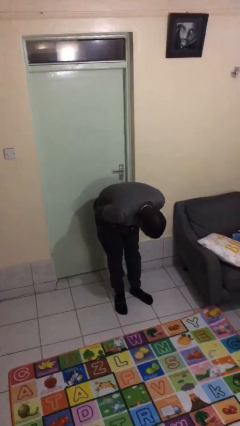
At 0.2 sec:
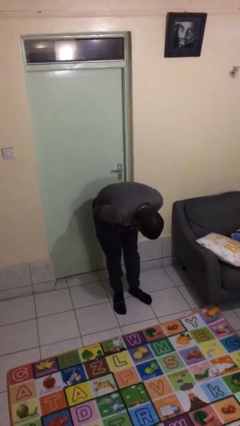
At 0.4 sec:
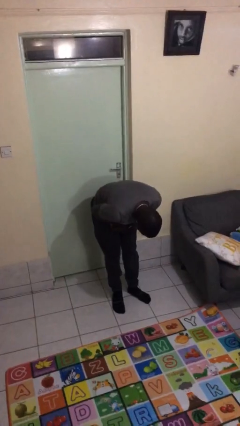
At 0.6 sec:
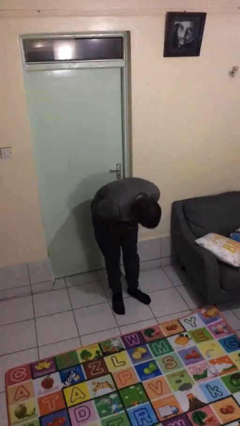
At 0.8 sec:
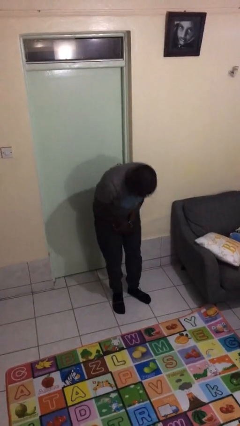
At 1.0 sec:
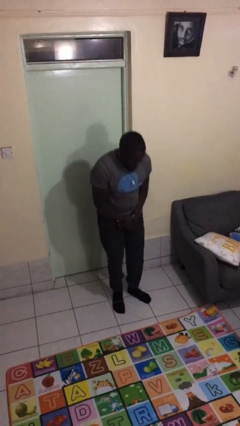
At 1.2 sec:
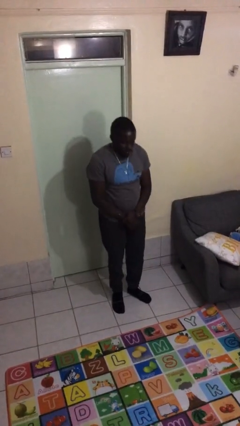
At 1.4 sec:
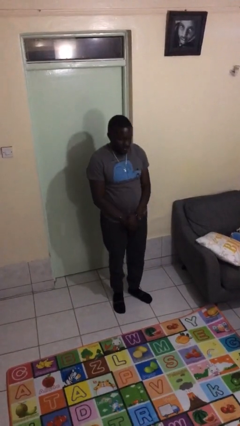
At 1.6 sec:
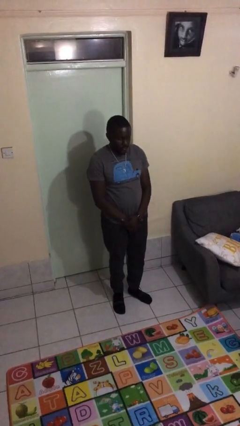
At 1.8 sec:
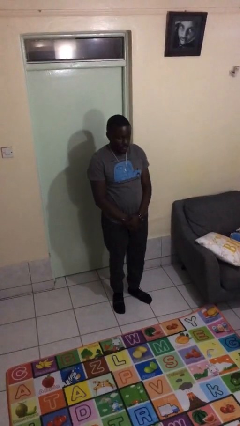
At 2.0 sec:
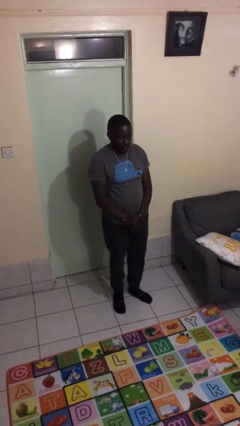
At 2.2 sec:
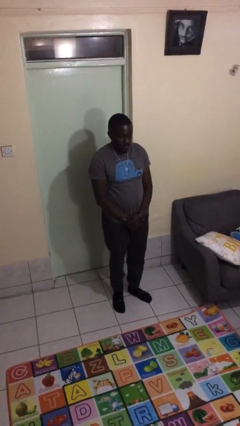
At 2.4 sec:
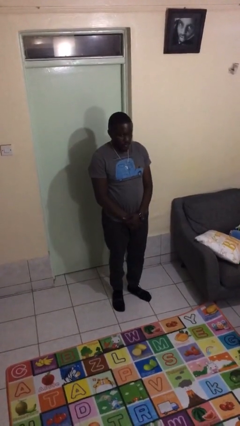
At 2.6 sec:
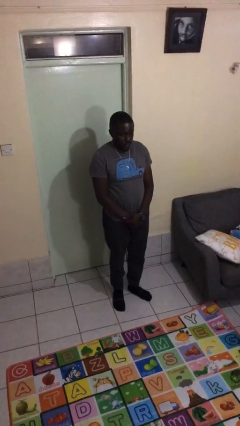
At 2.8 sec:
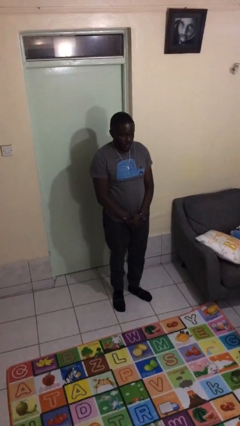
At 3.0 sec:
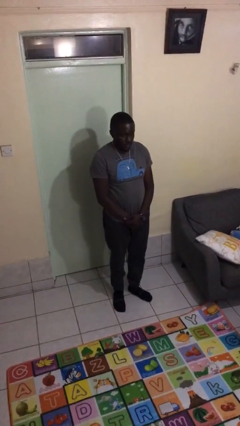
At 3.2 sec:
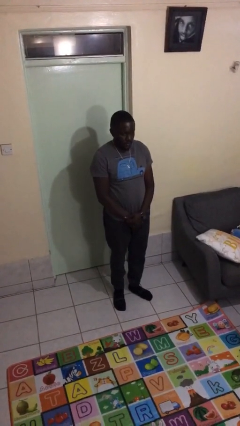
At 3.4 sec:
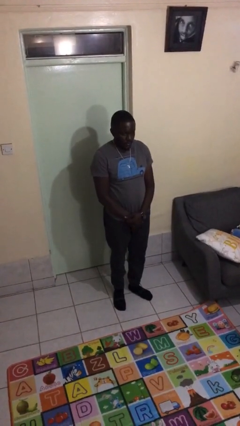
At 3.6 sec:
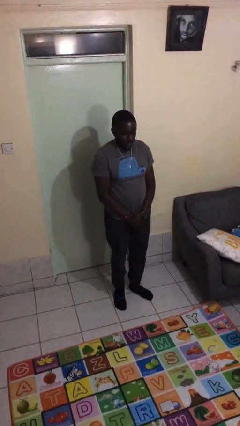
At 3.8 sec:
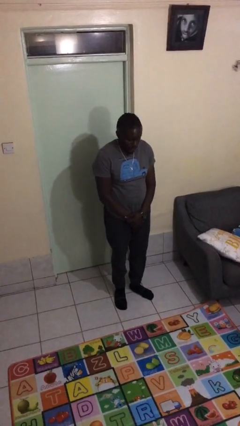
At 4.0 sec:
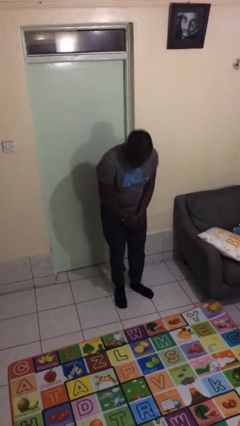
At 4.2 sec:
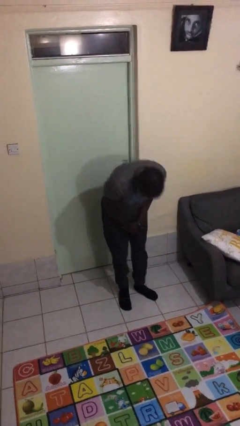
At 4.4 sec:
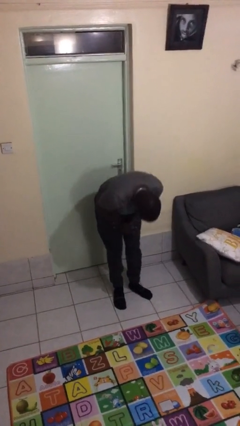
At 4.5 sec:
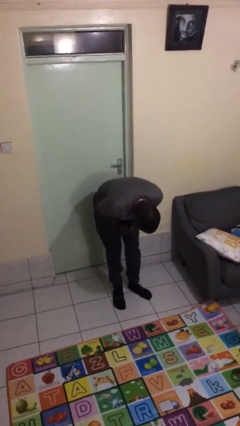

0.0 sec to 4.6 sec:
person bows

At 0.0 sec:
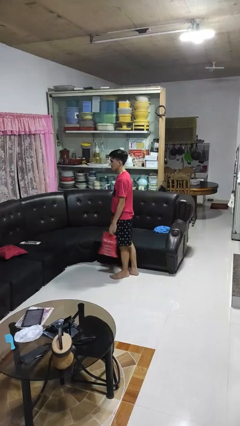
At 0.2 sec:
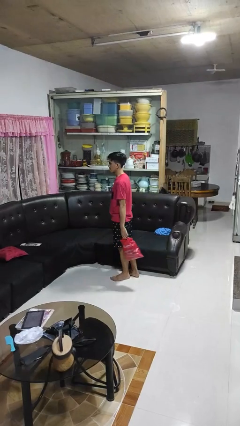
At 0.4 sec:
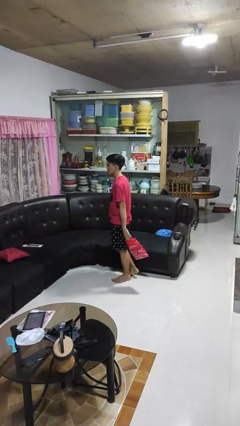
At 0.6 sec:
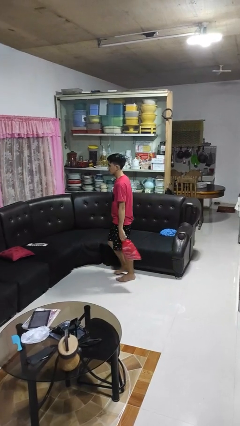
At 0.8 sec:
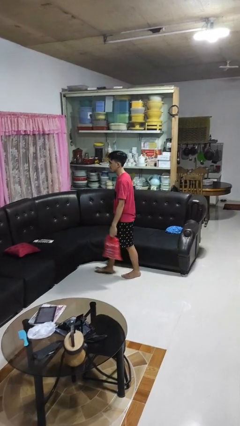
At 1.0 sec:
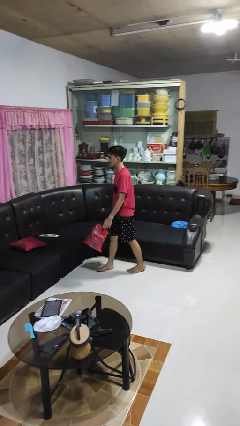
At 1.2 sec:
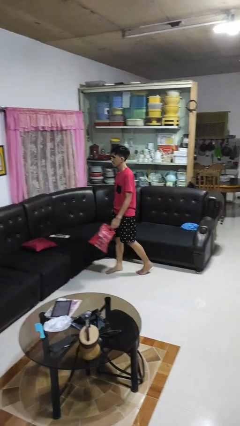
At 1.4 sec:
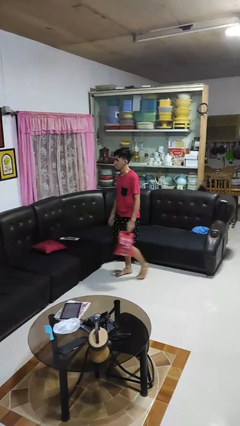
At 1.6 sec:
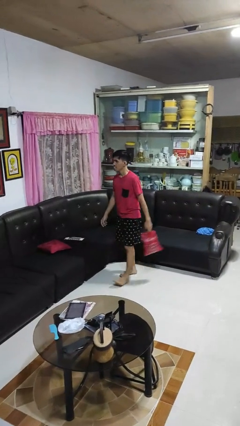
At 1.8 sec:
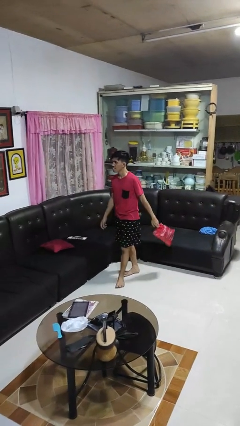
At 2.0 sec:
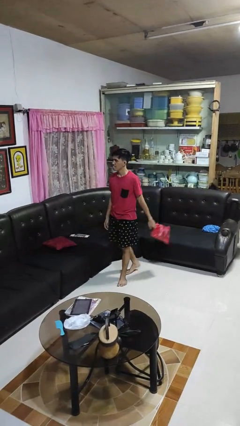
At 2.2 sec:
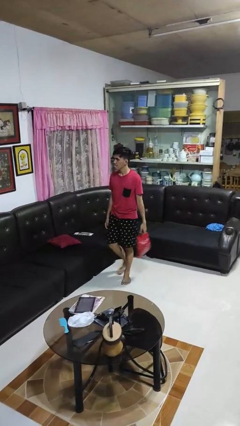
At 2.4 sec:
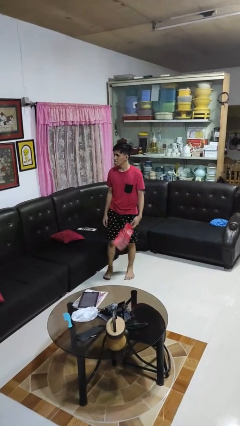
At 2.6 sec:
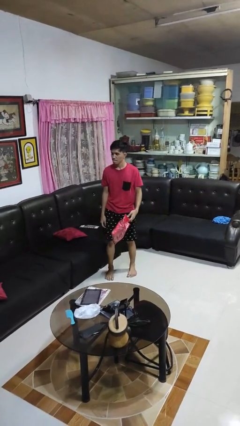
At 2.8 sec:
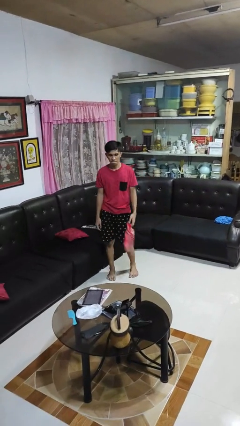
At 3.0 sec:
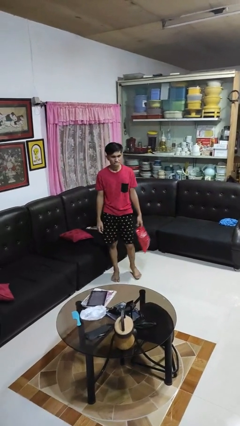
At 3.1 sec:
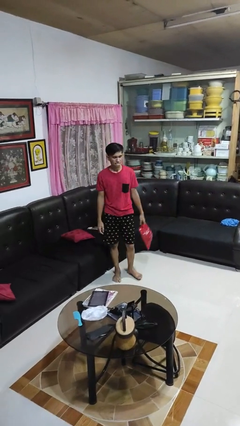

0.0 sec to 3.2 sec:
person carries groceries

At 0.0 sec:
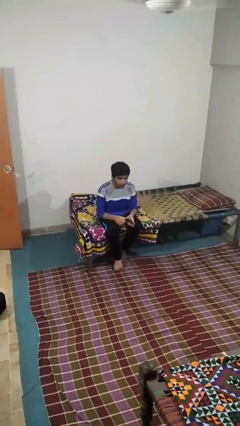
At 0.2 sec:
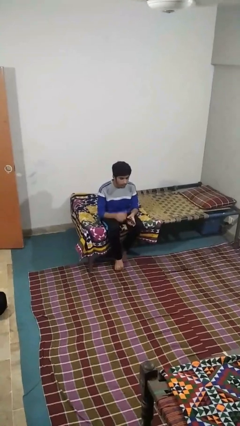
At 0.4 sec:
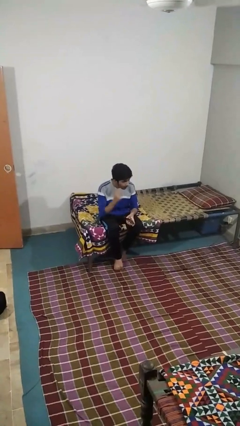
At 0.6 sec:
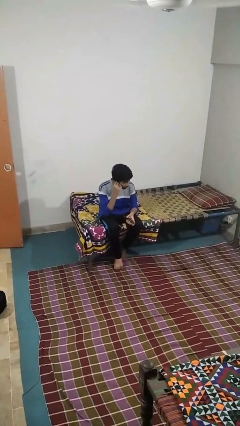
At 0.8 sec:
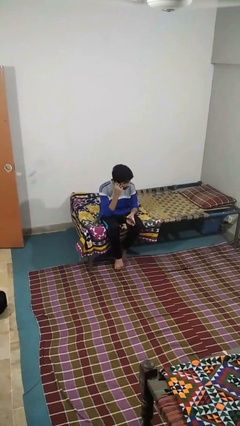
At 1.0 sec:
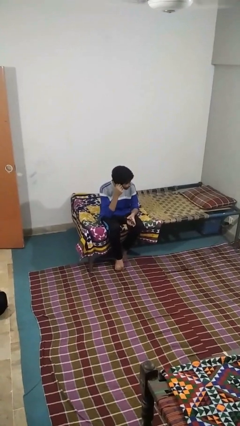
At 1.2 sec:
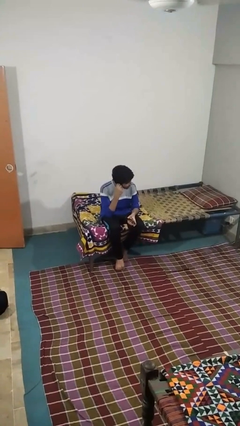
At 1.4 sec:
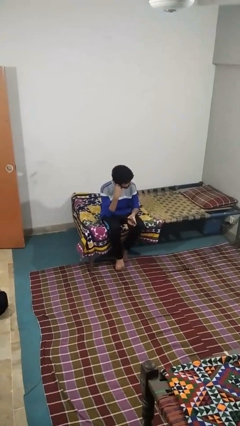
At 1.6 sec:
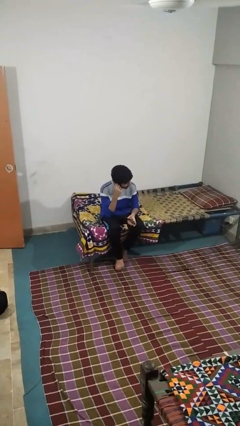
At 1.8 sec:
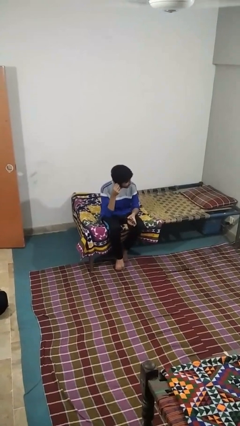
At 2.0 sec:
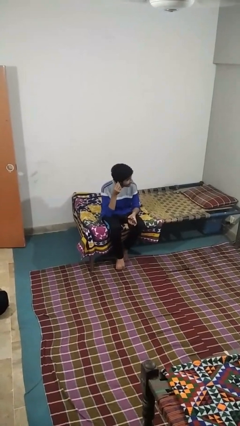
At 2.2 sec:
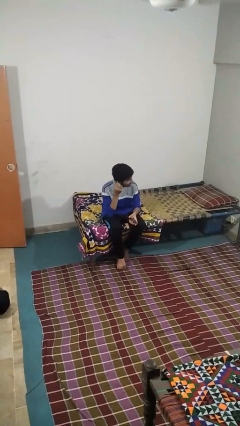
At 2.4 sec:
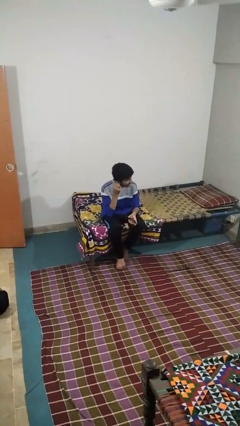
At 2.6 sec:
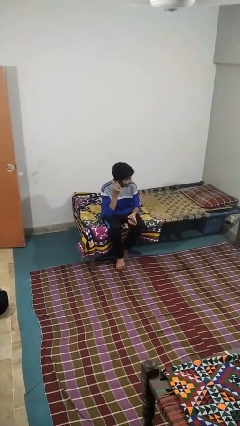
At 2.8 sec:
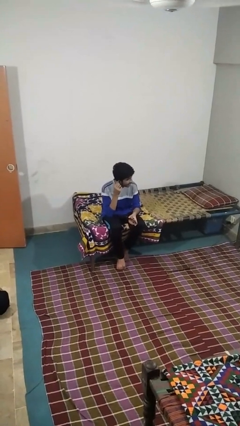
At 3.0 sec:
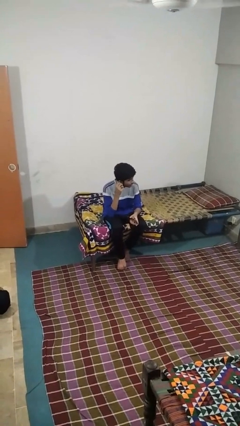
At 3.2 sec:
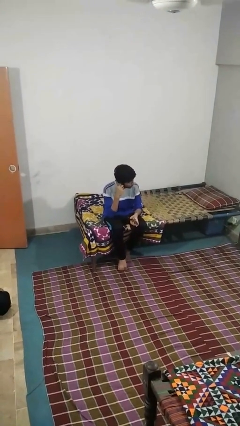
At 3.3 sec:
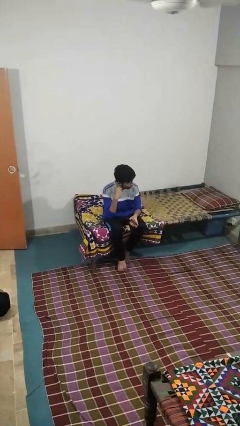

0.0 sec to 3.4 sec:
person touches earlobe

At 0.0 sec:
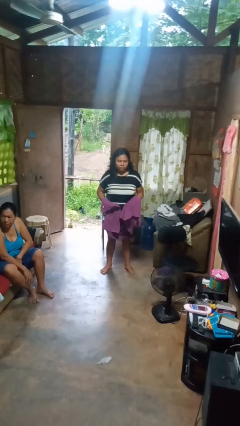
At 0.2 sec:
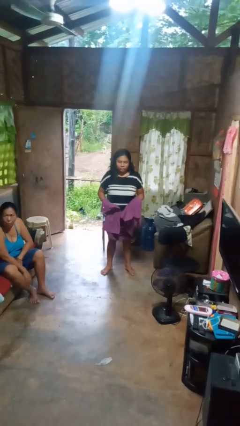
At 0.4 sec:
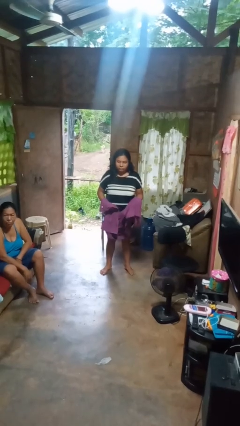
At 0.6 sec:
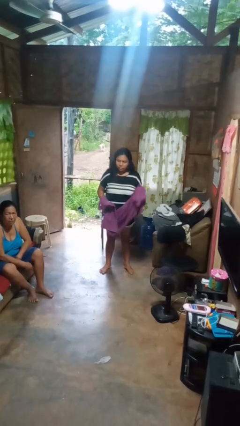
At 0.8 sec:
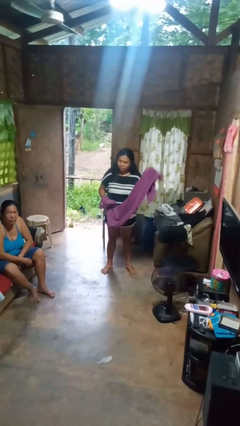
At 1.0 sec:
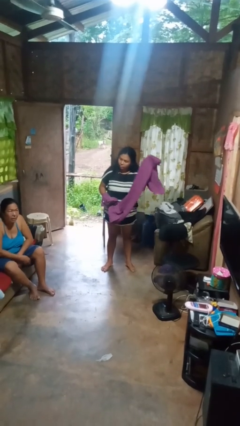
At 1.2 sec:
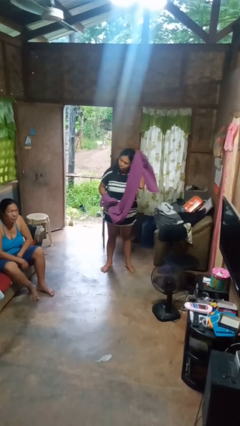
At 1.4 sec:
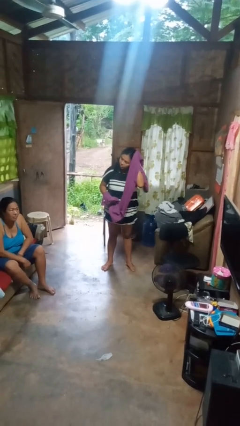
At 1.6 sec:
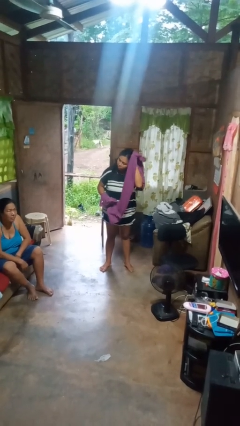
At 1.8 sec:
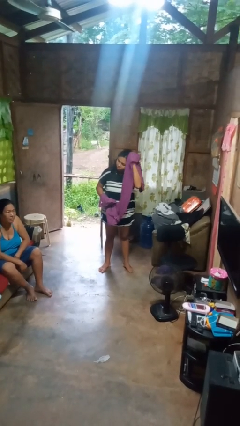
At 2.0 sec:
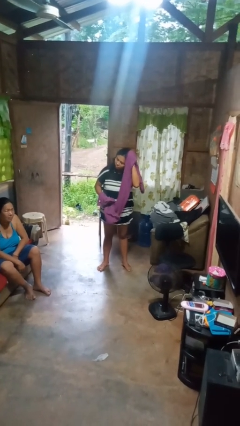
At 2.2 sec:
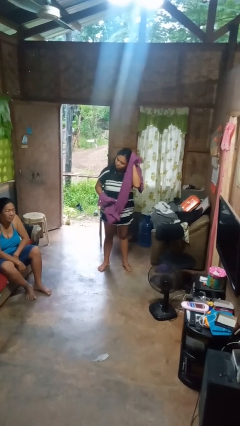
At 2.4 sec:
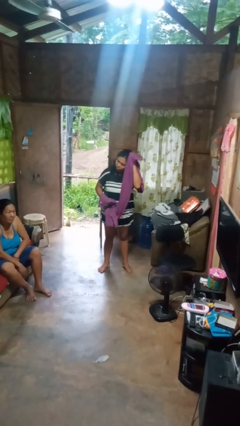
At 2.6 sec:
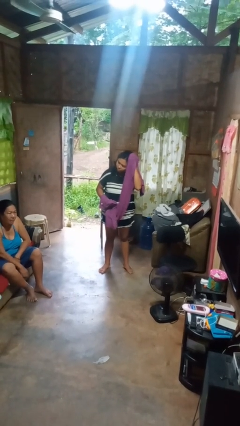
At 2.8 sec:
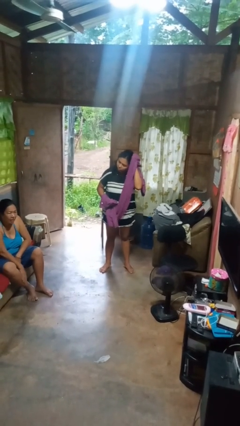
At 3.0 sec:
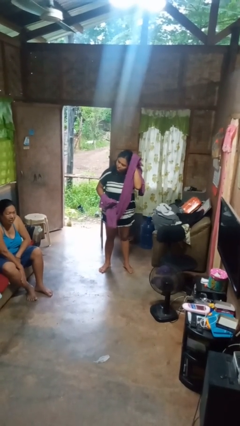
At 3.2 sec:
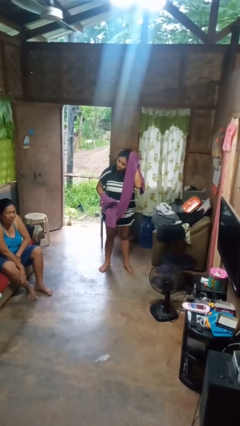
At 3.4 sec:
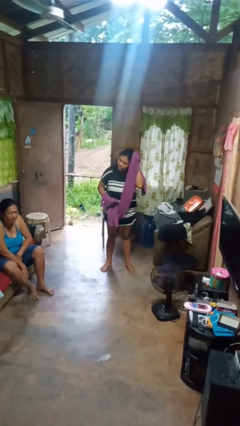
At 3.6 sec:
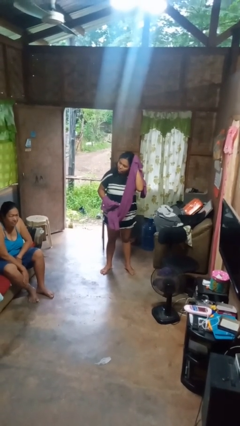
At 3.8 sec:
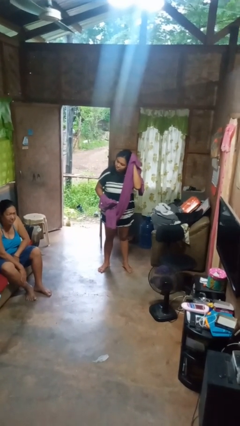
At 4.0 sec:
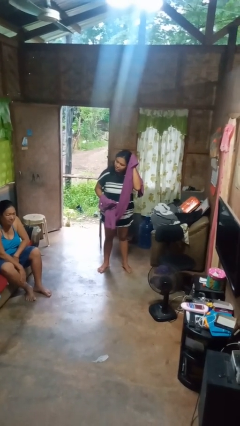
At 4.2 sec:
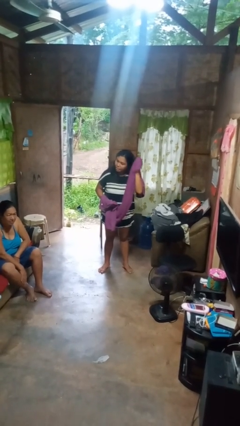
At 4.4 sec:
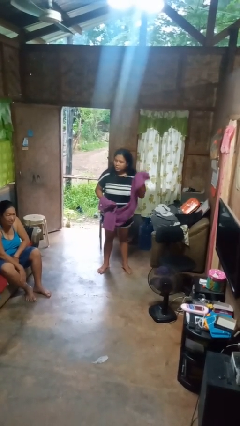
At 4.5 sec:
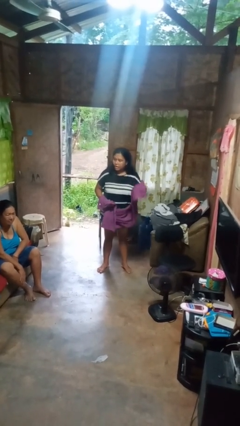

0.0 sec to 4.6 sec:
person dries hair with towel

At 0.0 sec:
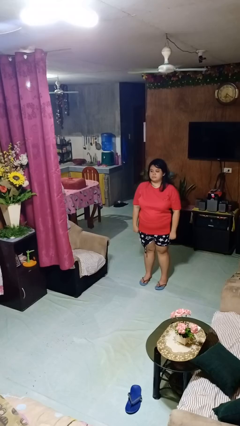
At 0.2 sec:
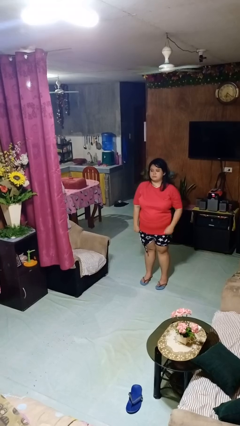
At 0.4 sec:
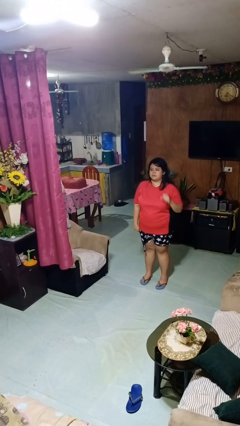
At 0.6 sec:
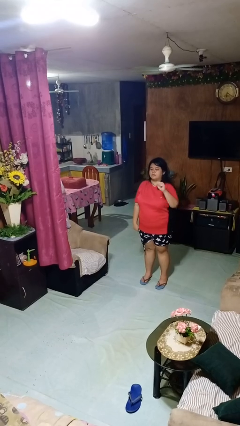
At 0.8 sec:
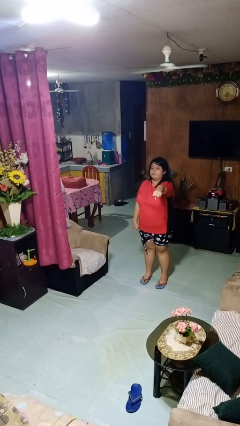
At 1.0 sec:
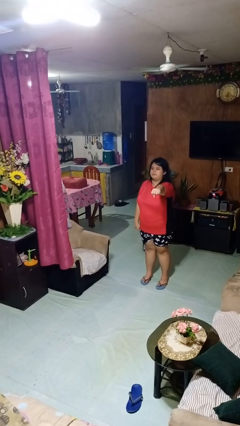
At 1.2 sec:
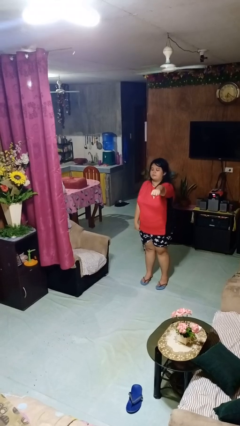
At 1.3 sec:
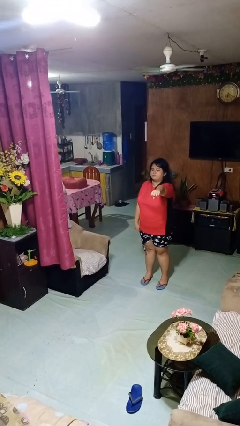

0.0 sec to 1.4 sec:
person punches

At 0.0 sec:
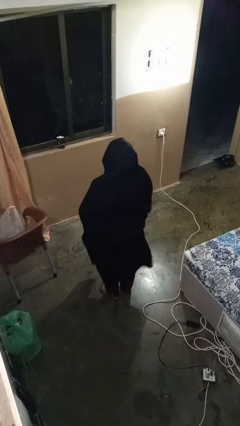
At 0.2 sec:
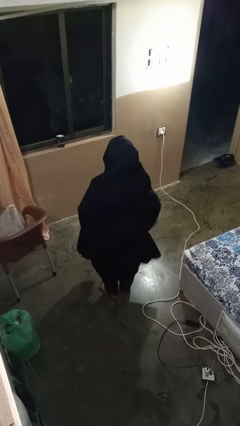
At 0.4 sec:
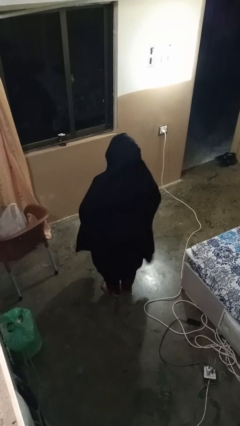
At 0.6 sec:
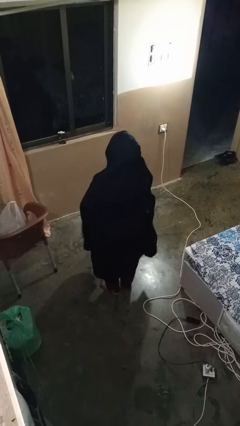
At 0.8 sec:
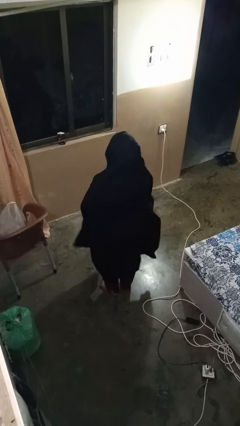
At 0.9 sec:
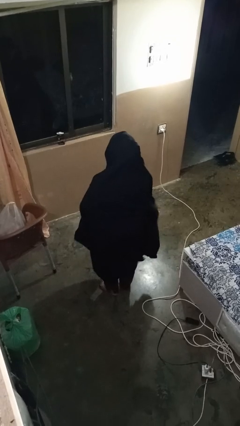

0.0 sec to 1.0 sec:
person gestures lower hand
